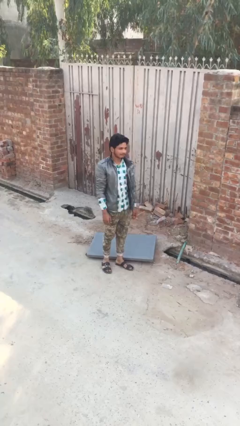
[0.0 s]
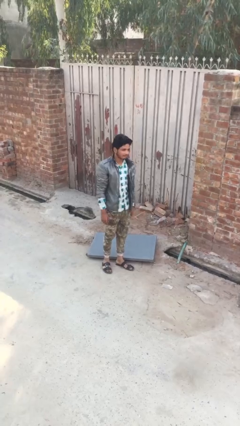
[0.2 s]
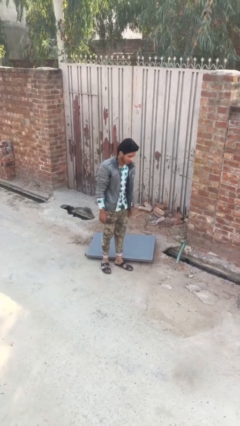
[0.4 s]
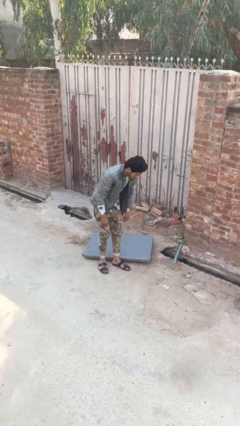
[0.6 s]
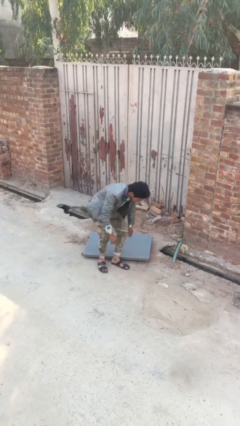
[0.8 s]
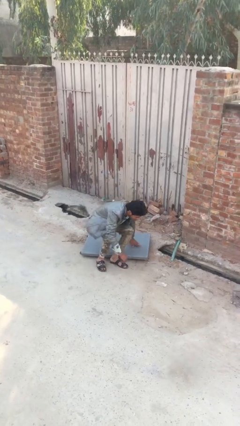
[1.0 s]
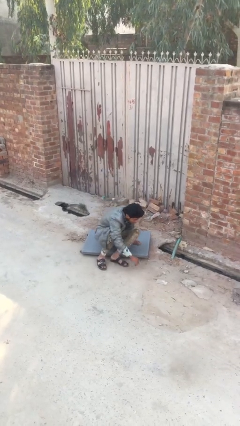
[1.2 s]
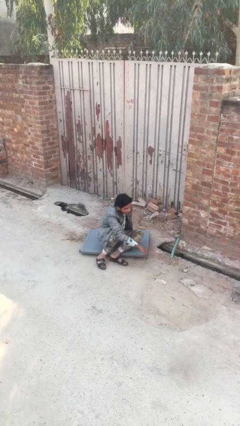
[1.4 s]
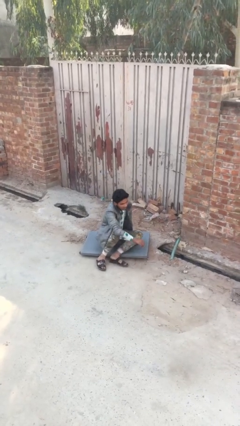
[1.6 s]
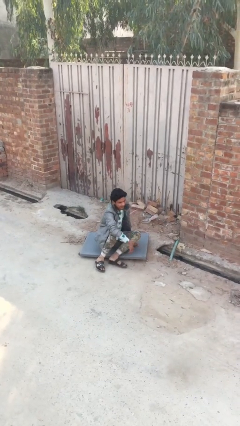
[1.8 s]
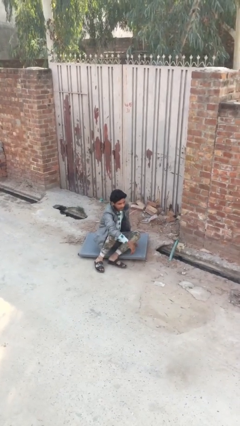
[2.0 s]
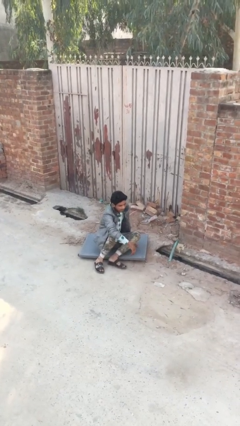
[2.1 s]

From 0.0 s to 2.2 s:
person sits down

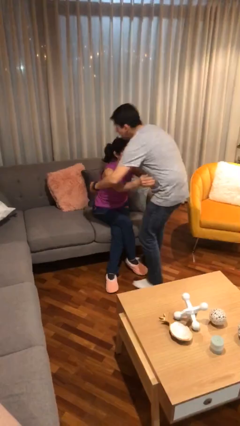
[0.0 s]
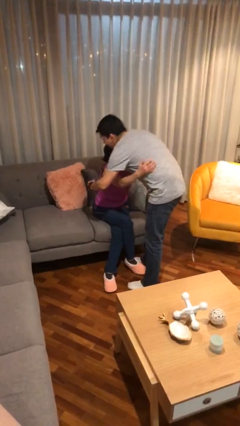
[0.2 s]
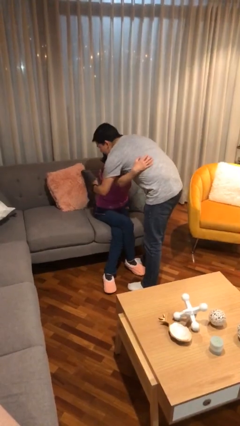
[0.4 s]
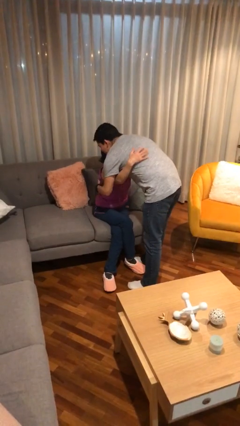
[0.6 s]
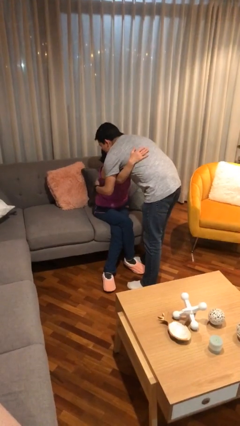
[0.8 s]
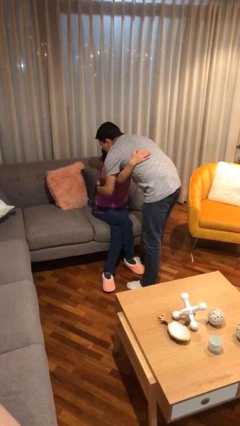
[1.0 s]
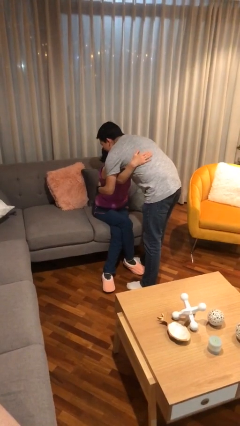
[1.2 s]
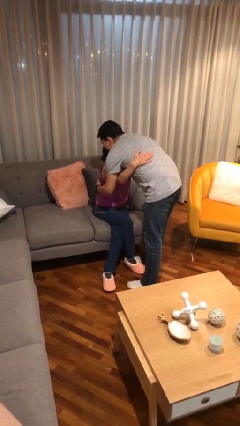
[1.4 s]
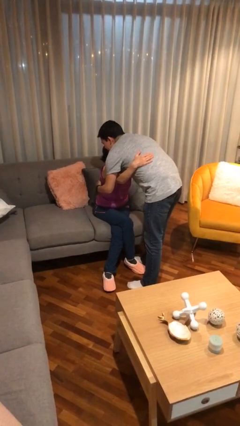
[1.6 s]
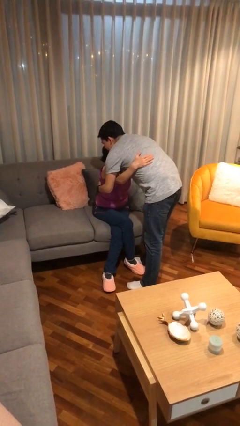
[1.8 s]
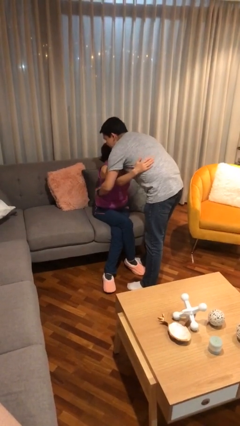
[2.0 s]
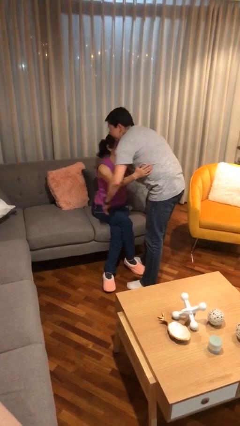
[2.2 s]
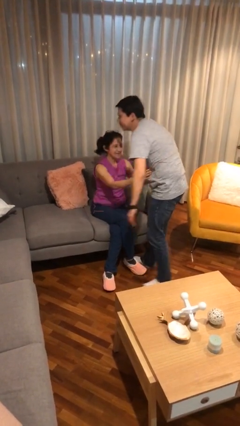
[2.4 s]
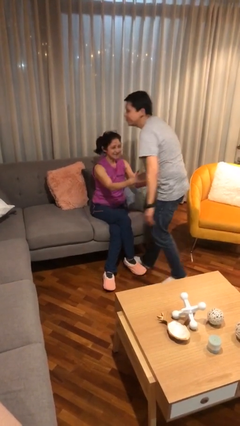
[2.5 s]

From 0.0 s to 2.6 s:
person embraces person

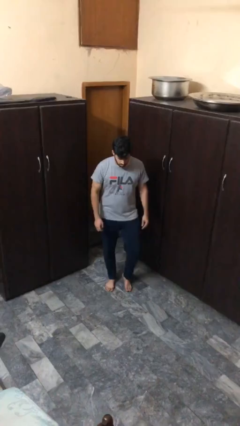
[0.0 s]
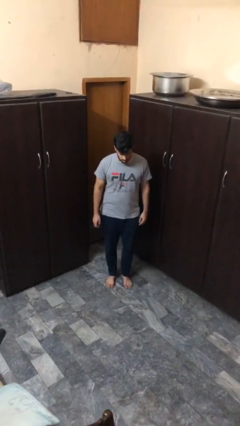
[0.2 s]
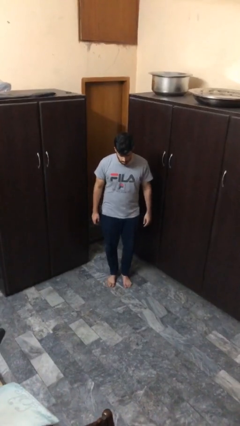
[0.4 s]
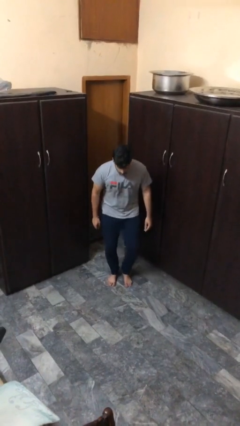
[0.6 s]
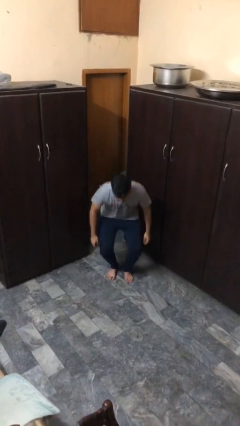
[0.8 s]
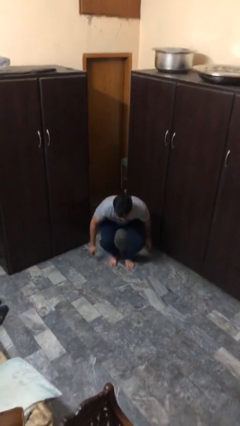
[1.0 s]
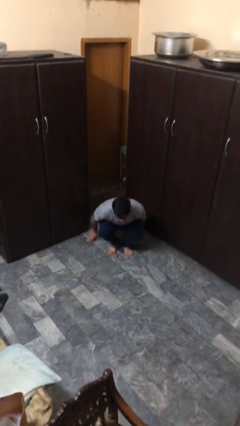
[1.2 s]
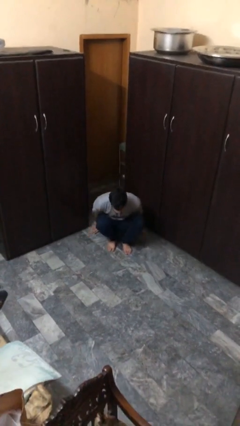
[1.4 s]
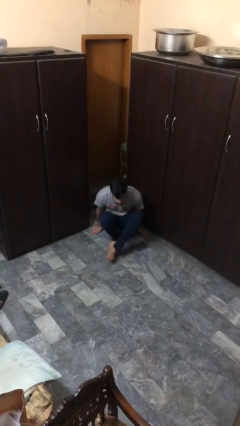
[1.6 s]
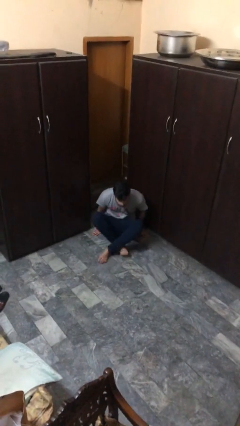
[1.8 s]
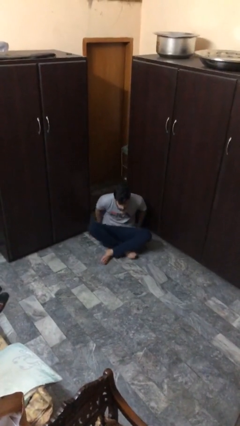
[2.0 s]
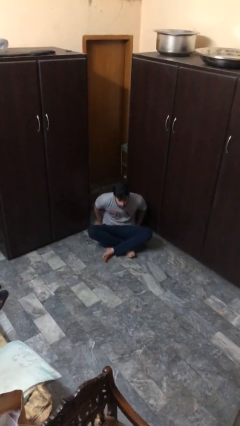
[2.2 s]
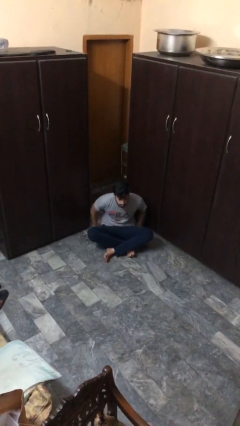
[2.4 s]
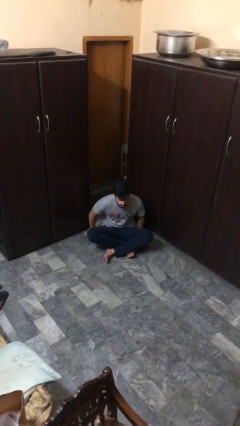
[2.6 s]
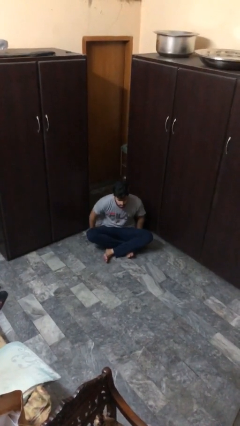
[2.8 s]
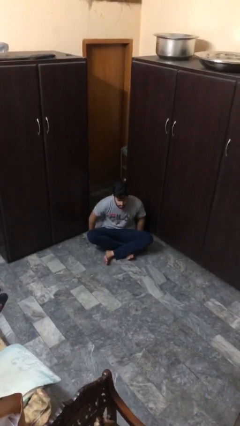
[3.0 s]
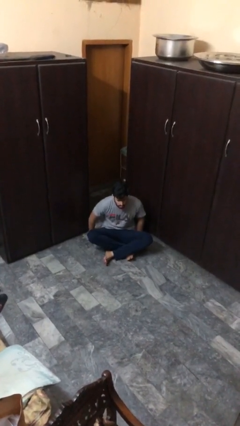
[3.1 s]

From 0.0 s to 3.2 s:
person sits crisscross

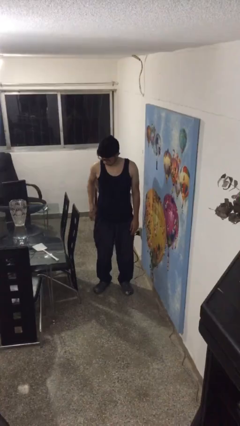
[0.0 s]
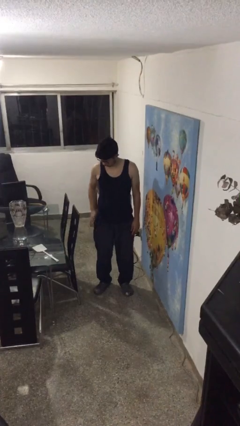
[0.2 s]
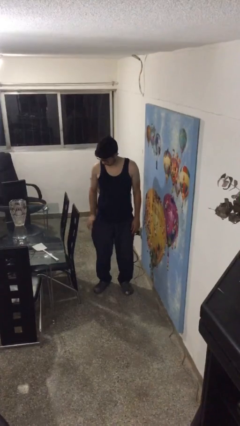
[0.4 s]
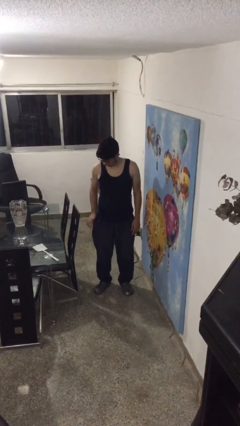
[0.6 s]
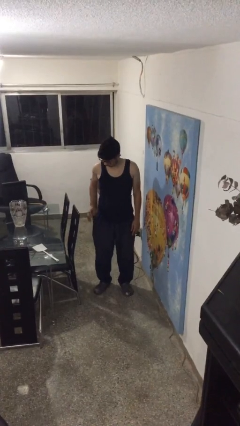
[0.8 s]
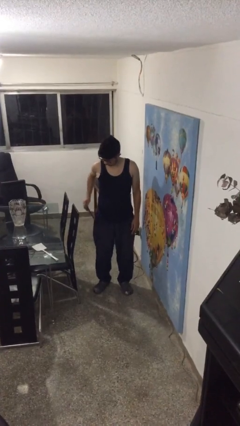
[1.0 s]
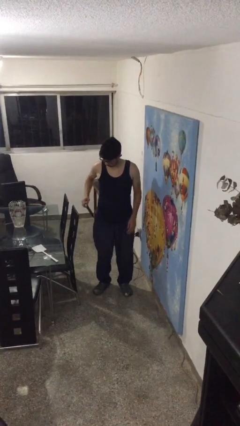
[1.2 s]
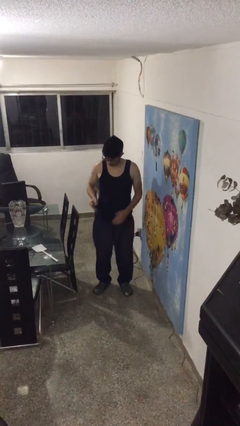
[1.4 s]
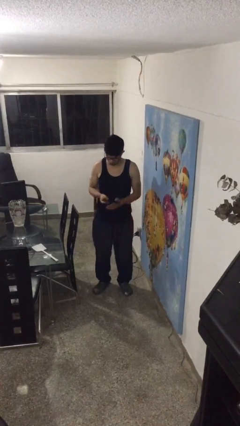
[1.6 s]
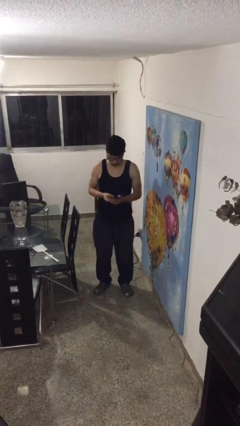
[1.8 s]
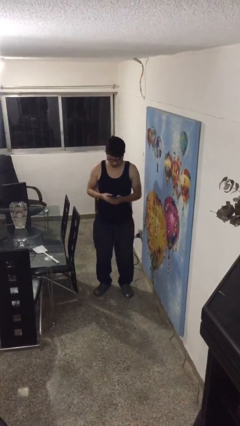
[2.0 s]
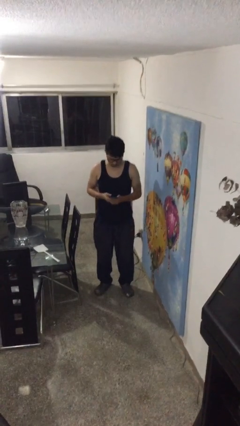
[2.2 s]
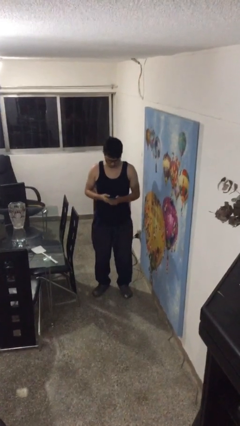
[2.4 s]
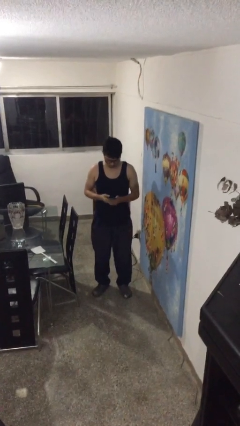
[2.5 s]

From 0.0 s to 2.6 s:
person takes phone from pocket

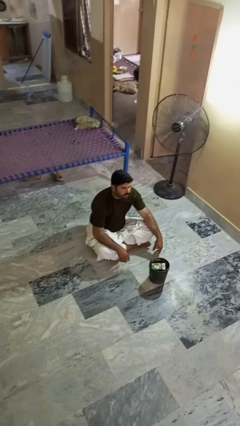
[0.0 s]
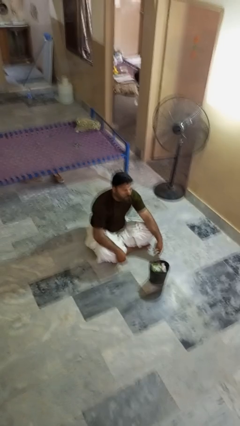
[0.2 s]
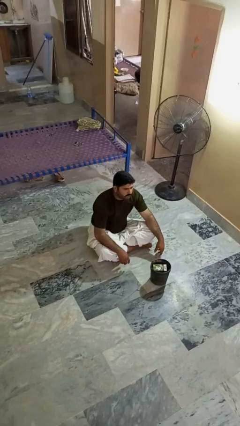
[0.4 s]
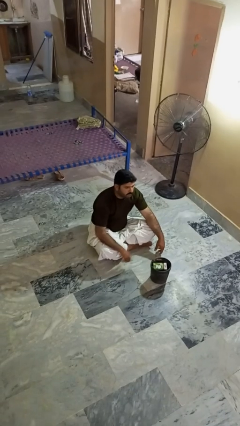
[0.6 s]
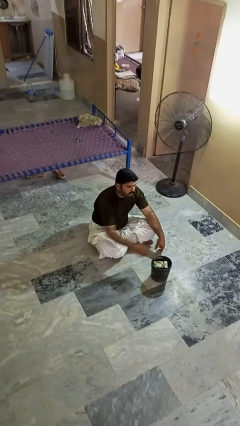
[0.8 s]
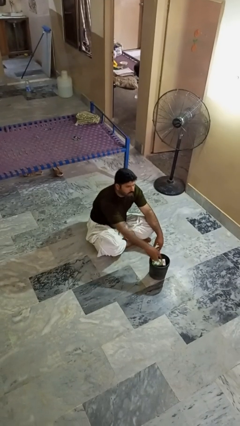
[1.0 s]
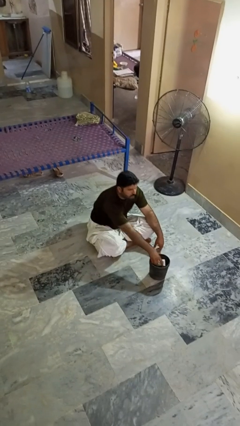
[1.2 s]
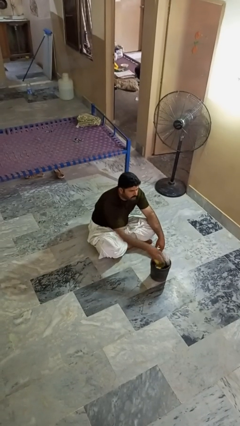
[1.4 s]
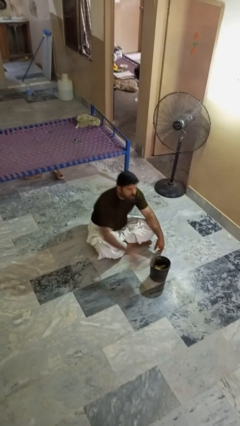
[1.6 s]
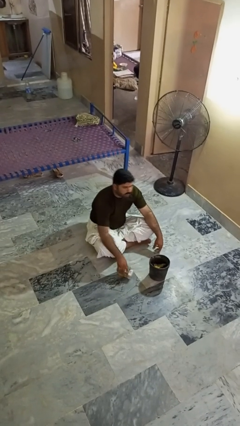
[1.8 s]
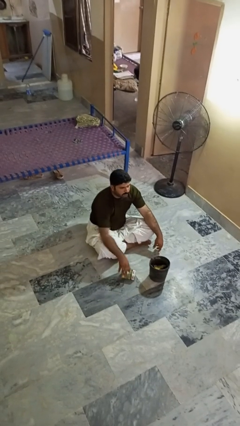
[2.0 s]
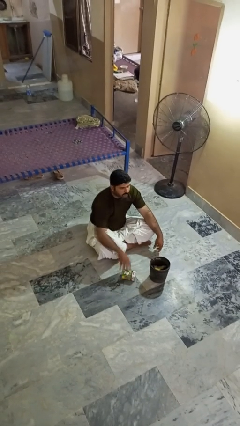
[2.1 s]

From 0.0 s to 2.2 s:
person takes object from basket

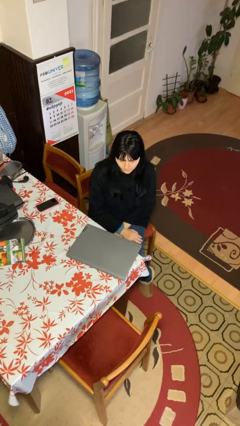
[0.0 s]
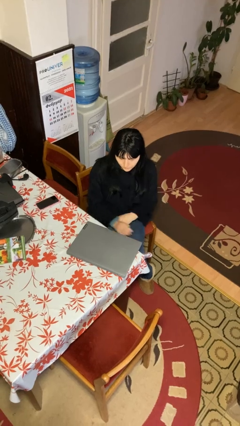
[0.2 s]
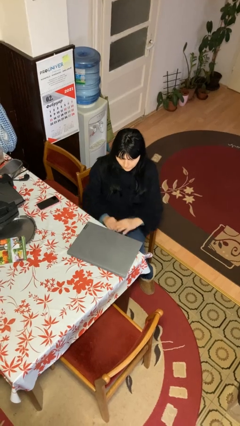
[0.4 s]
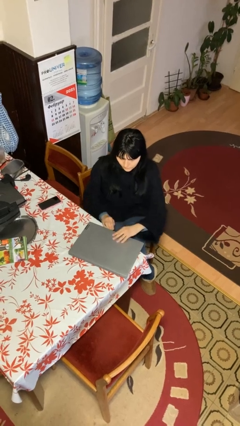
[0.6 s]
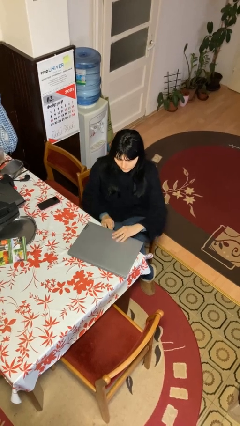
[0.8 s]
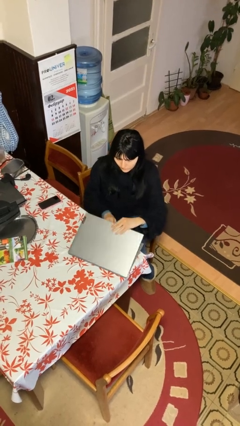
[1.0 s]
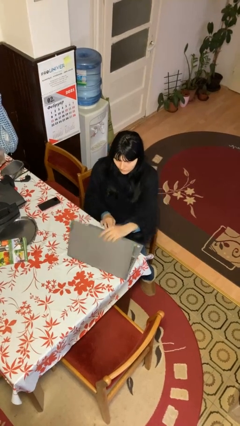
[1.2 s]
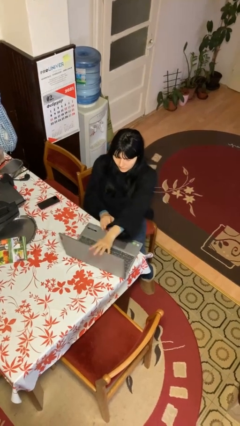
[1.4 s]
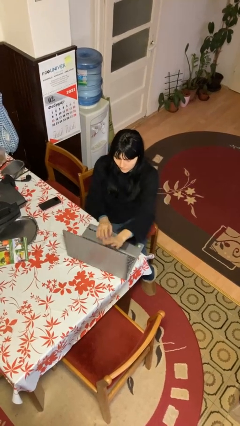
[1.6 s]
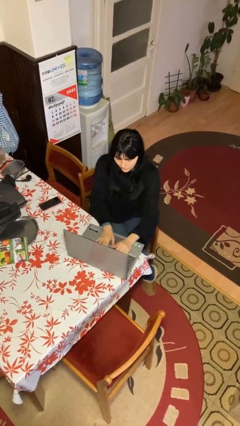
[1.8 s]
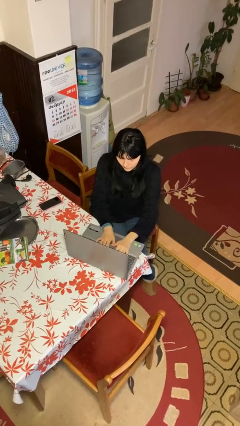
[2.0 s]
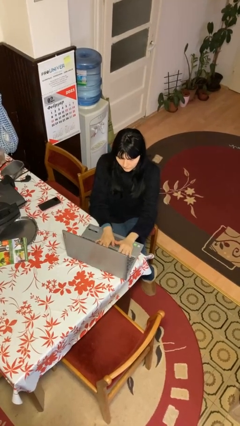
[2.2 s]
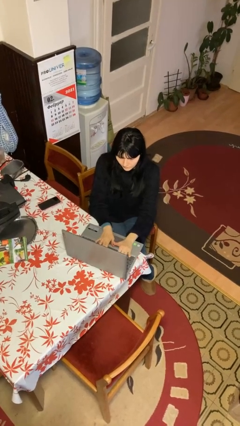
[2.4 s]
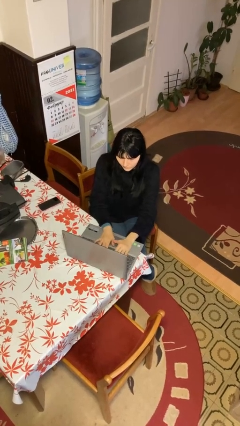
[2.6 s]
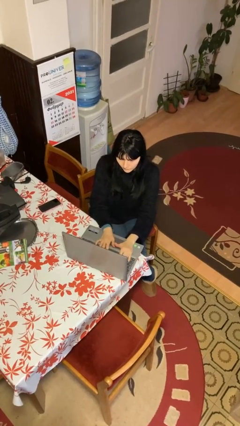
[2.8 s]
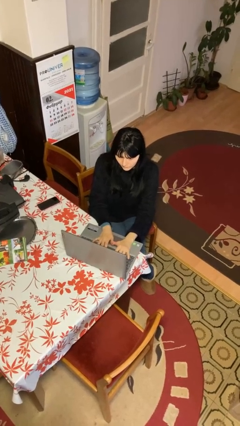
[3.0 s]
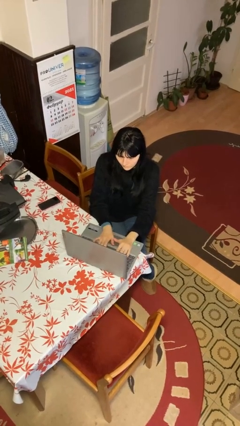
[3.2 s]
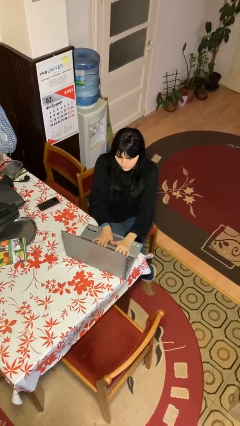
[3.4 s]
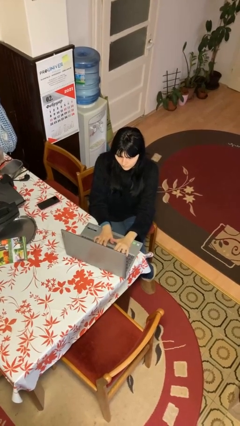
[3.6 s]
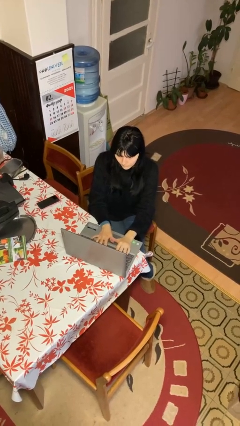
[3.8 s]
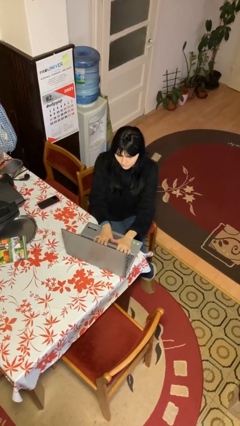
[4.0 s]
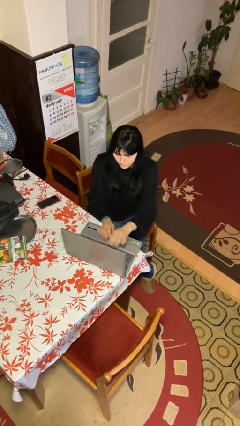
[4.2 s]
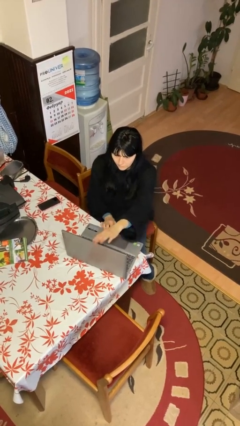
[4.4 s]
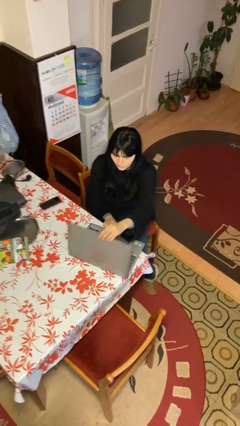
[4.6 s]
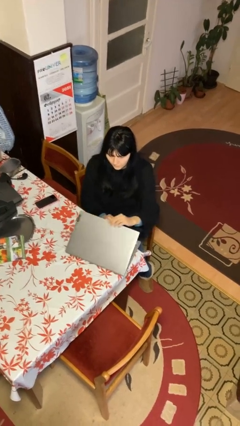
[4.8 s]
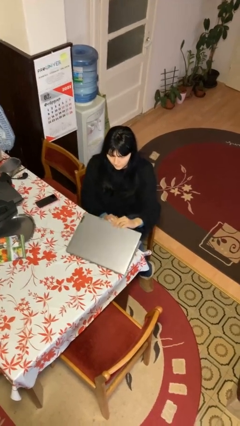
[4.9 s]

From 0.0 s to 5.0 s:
person interacts with laptop

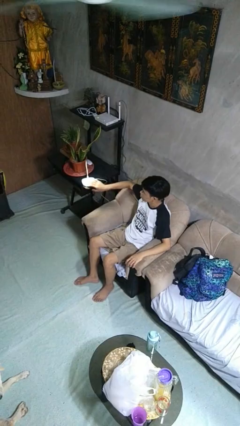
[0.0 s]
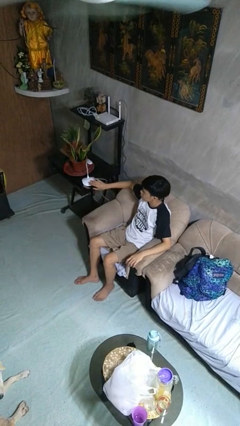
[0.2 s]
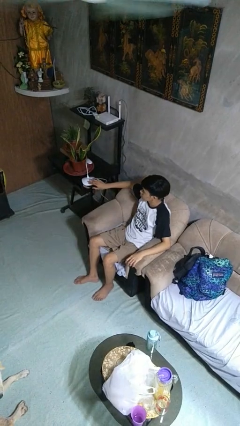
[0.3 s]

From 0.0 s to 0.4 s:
person turns off lamp
